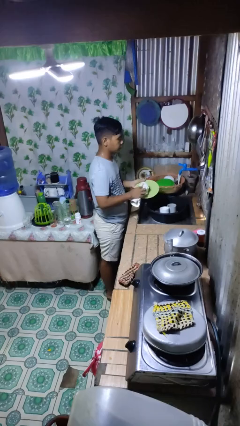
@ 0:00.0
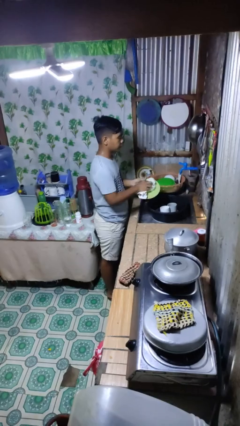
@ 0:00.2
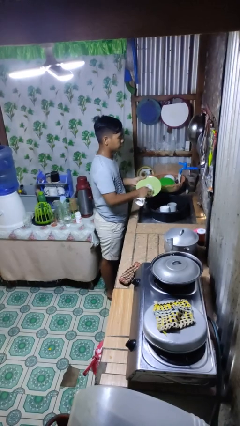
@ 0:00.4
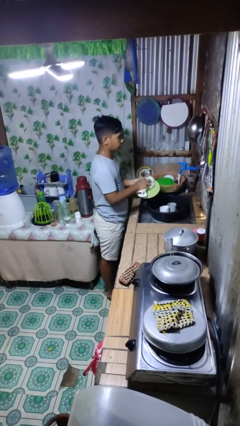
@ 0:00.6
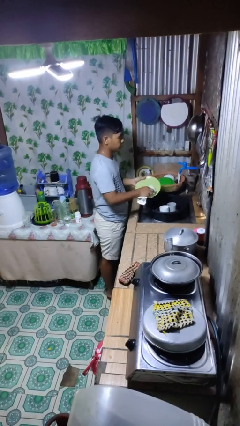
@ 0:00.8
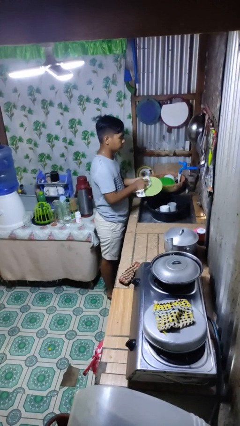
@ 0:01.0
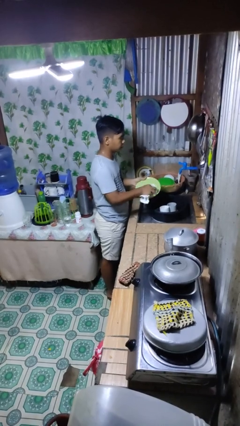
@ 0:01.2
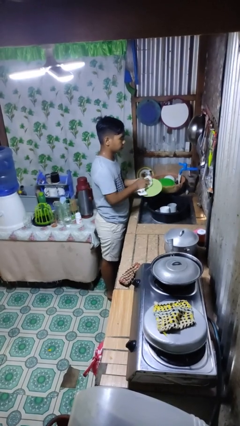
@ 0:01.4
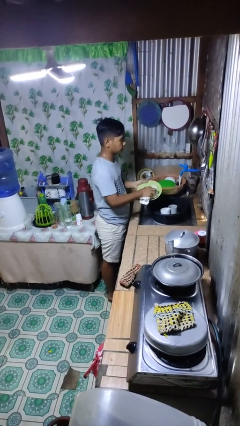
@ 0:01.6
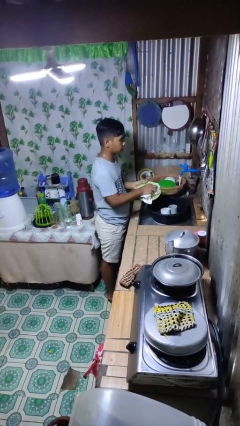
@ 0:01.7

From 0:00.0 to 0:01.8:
person dries dish

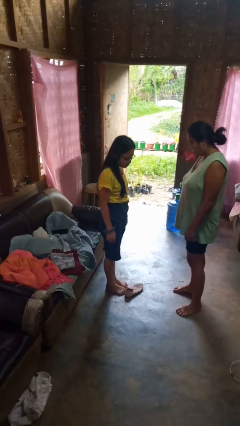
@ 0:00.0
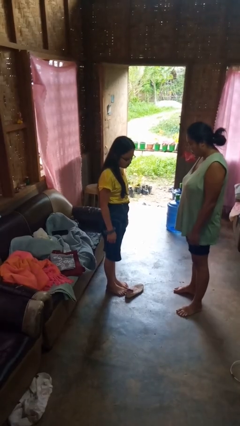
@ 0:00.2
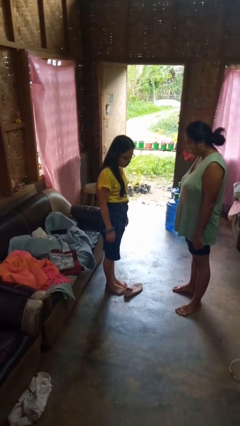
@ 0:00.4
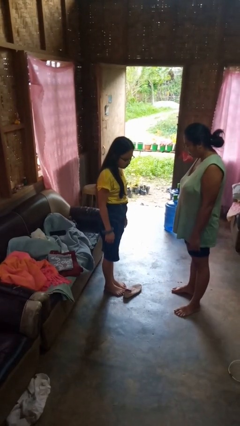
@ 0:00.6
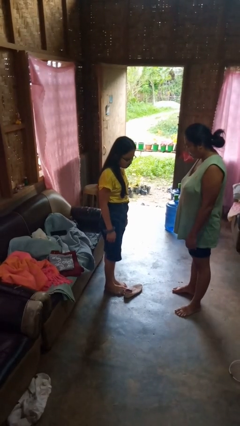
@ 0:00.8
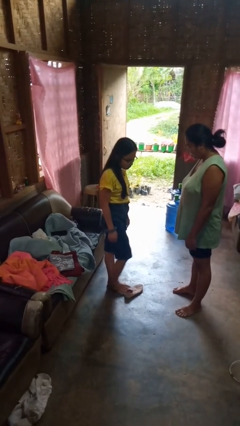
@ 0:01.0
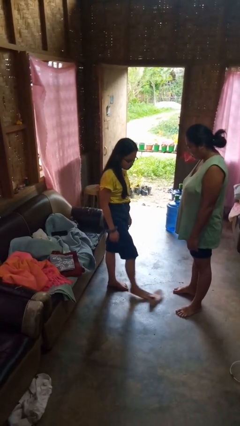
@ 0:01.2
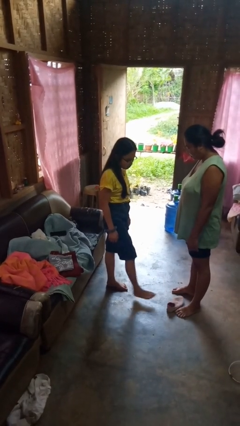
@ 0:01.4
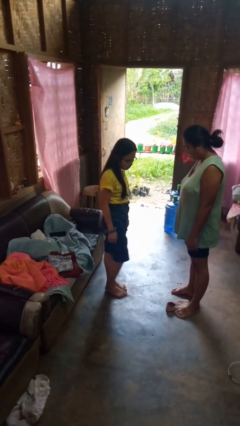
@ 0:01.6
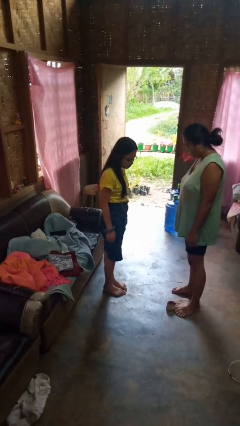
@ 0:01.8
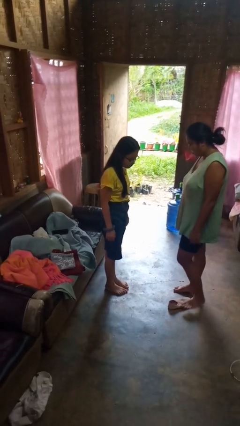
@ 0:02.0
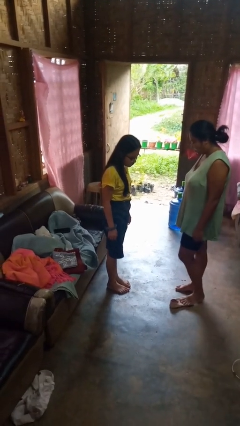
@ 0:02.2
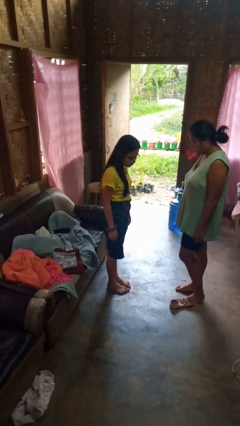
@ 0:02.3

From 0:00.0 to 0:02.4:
person kicks object to person

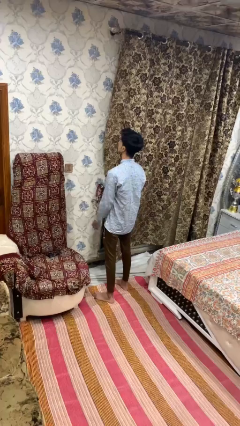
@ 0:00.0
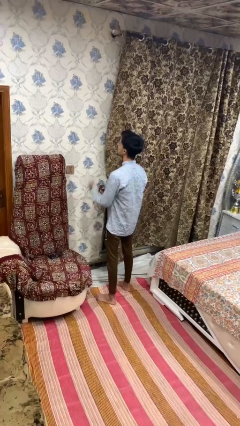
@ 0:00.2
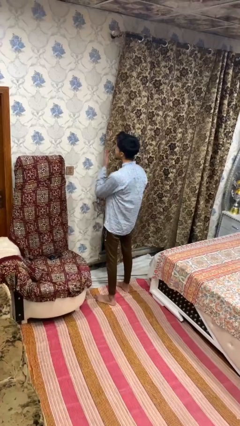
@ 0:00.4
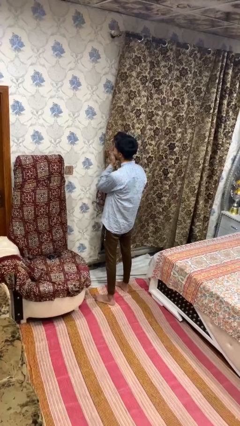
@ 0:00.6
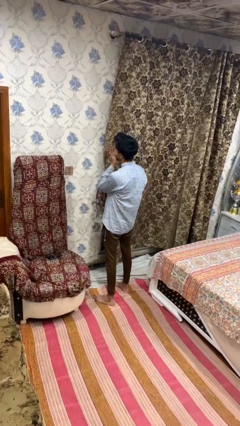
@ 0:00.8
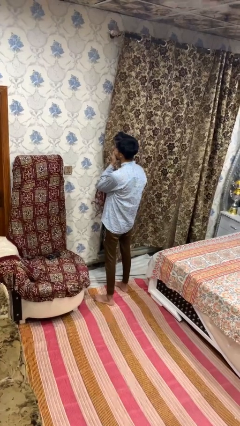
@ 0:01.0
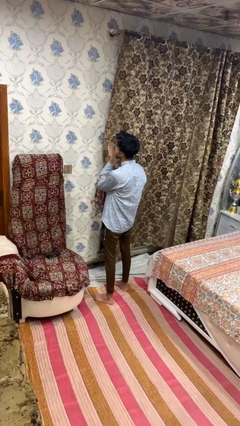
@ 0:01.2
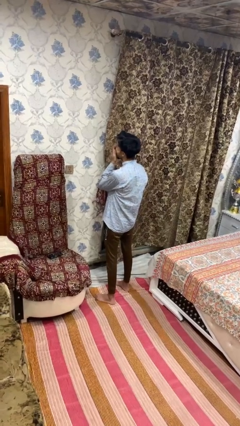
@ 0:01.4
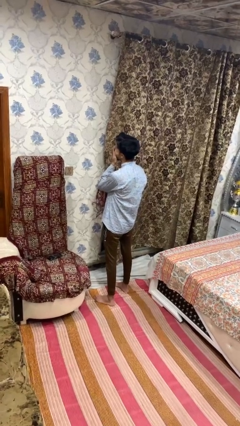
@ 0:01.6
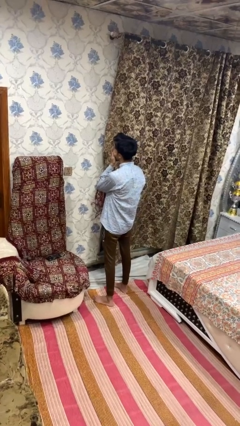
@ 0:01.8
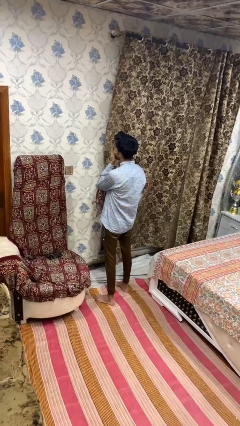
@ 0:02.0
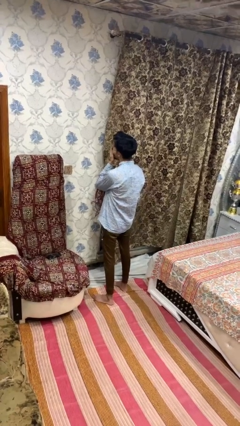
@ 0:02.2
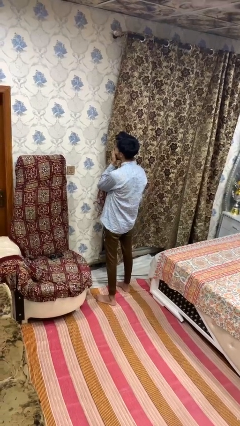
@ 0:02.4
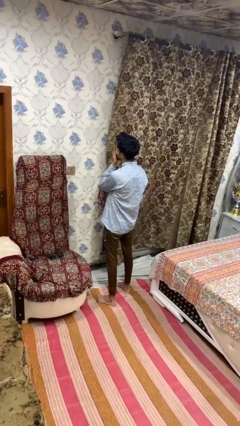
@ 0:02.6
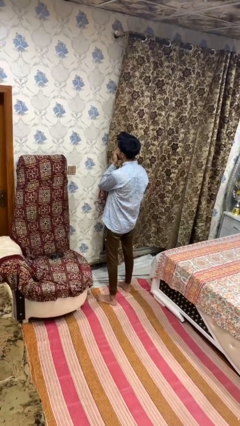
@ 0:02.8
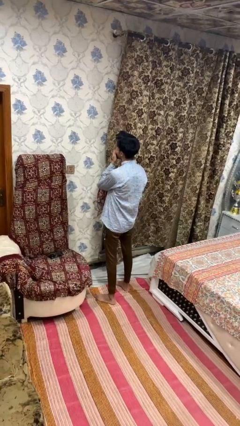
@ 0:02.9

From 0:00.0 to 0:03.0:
person yawns

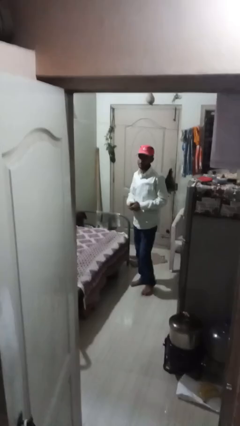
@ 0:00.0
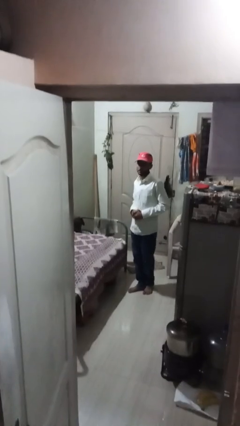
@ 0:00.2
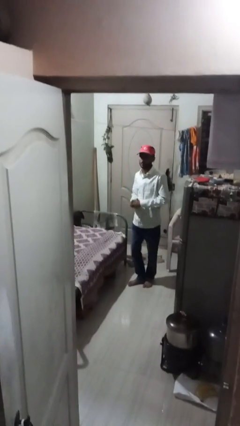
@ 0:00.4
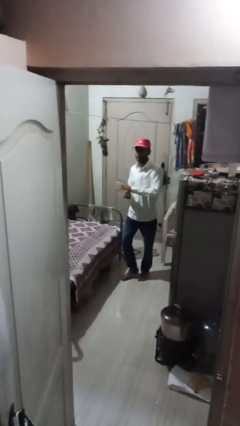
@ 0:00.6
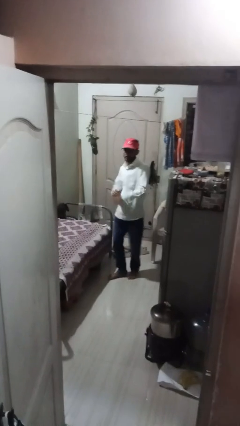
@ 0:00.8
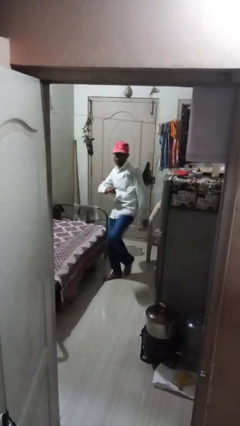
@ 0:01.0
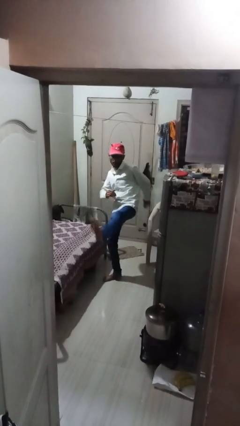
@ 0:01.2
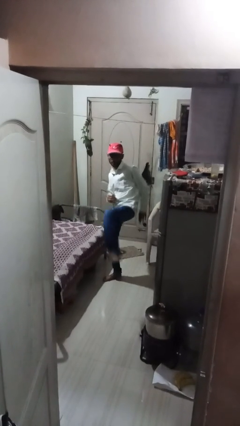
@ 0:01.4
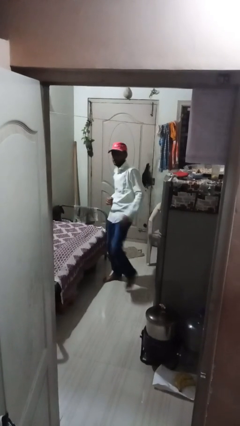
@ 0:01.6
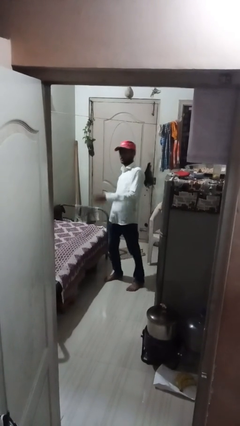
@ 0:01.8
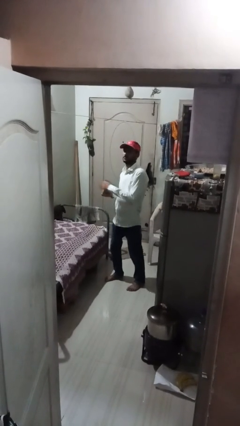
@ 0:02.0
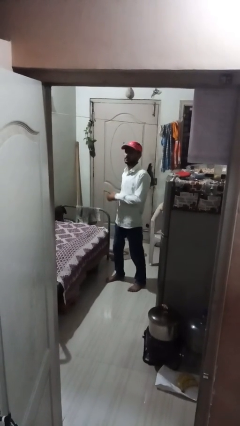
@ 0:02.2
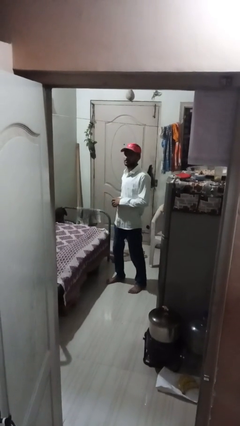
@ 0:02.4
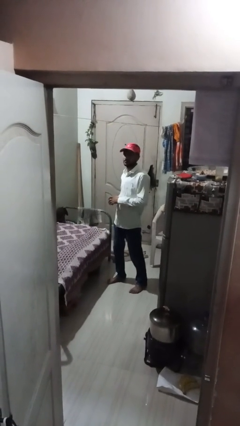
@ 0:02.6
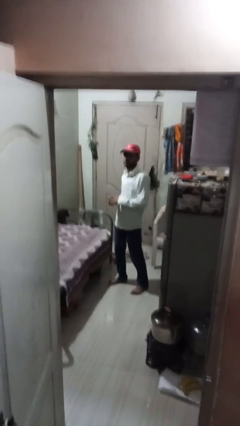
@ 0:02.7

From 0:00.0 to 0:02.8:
person karate kicks

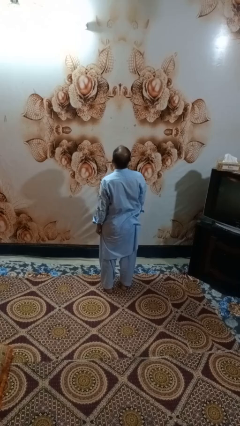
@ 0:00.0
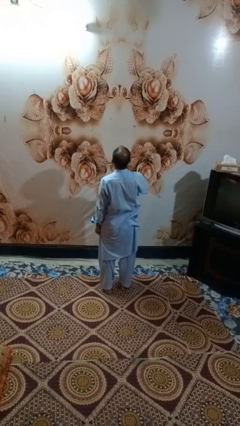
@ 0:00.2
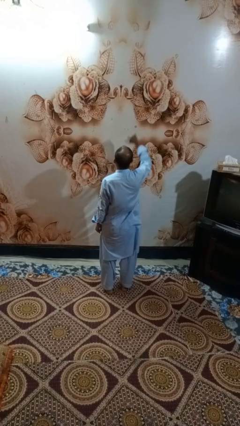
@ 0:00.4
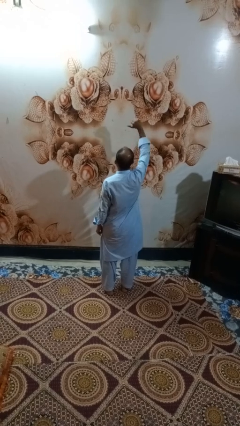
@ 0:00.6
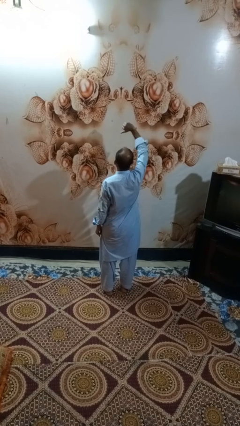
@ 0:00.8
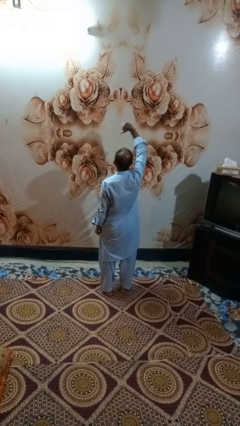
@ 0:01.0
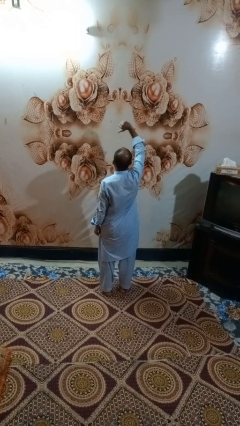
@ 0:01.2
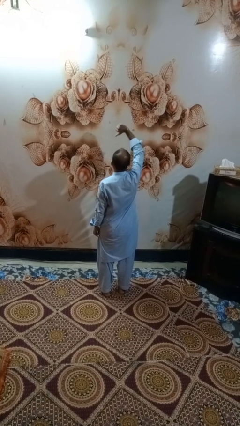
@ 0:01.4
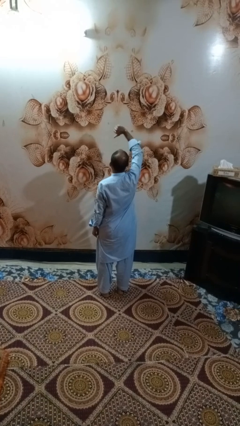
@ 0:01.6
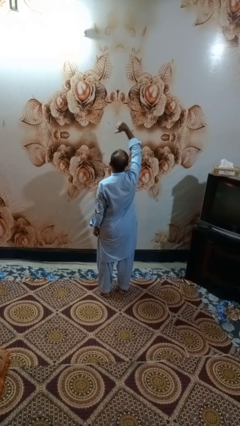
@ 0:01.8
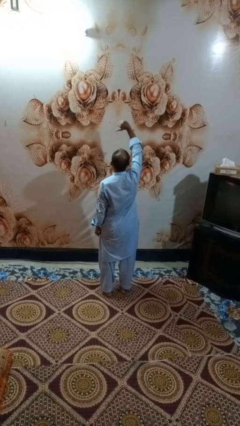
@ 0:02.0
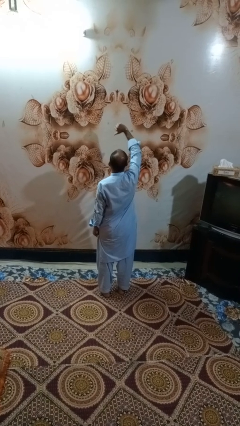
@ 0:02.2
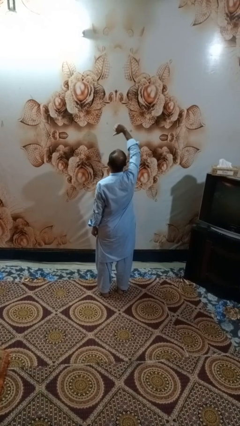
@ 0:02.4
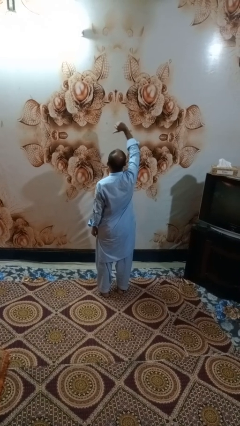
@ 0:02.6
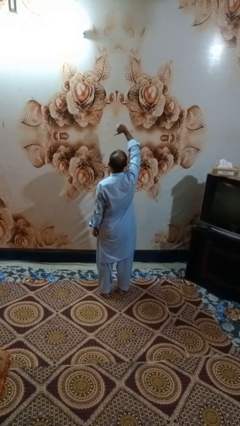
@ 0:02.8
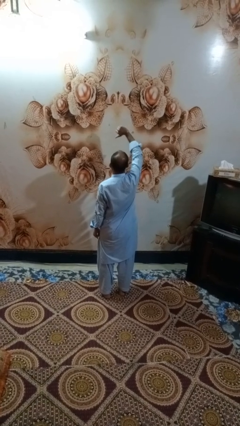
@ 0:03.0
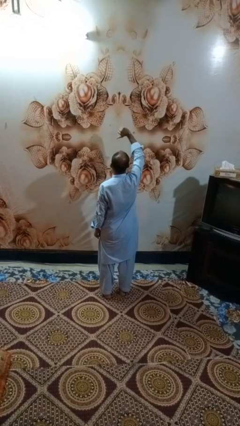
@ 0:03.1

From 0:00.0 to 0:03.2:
person gestures thumbs down

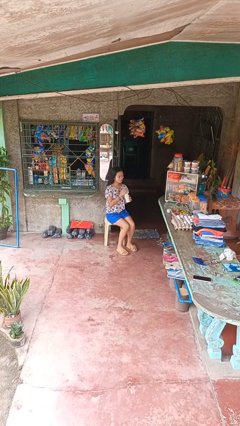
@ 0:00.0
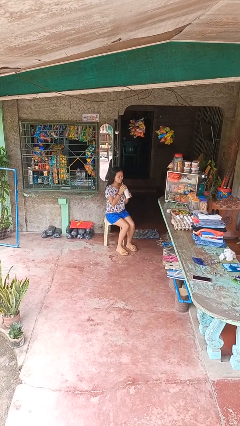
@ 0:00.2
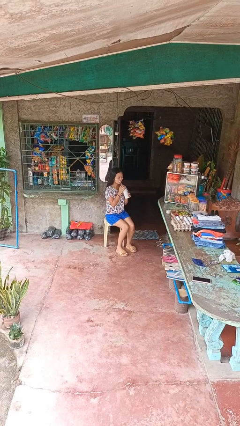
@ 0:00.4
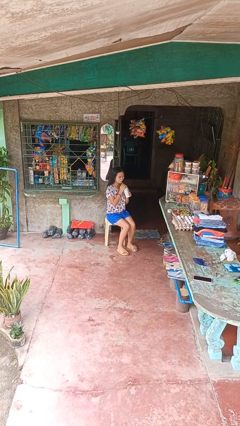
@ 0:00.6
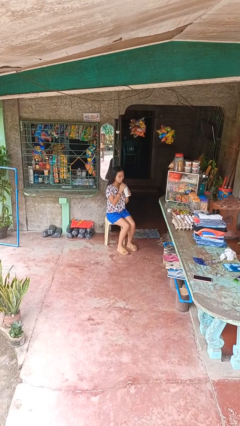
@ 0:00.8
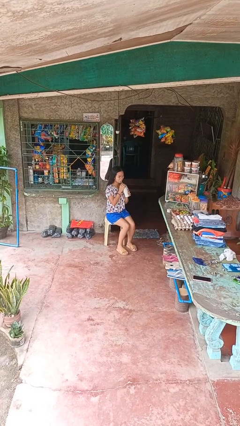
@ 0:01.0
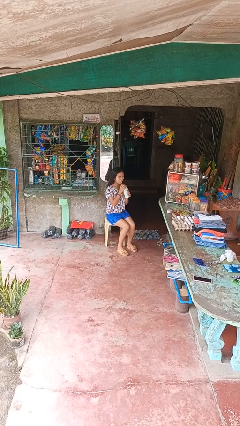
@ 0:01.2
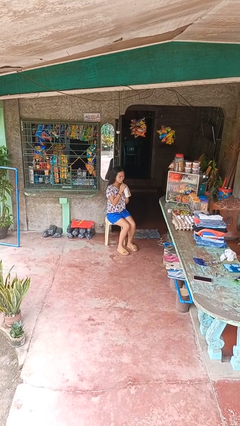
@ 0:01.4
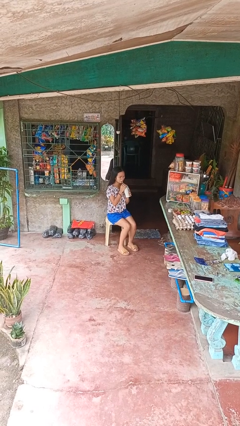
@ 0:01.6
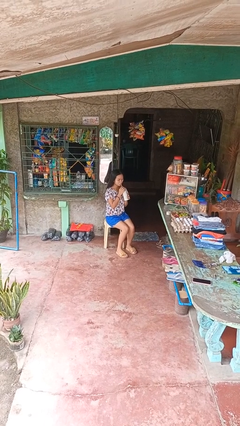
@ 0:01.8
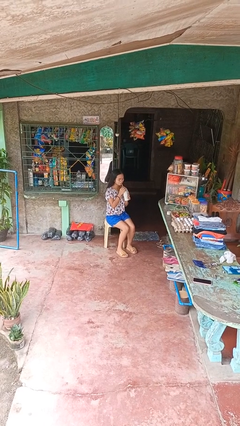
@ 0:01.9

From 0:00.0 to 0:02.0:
person drinks from straw

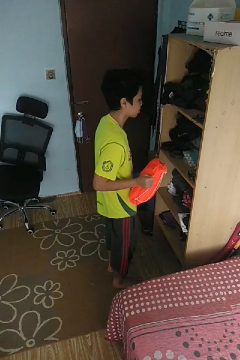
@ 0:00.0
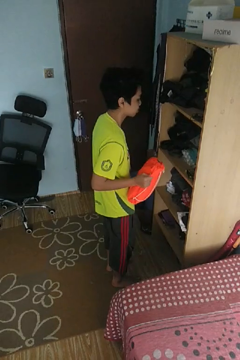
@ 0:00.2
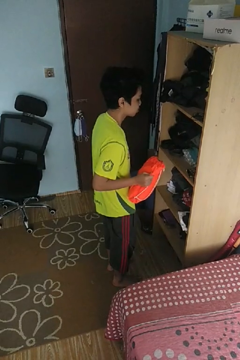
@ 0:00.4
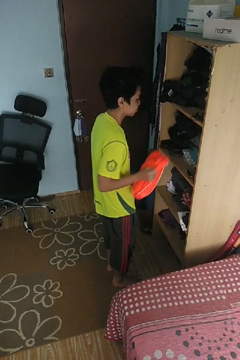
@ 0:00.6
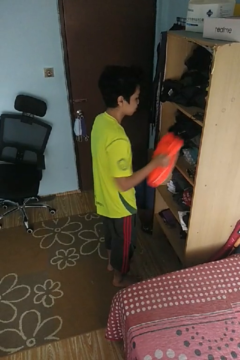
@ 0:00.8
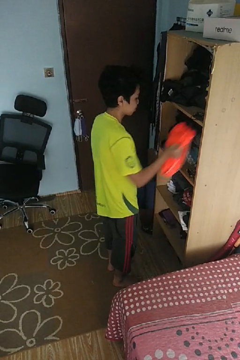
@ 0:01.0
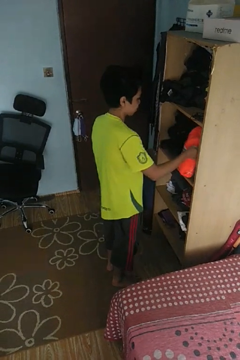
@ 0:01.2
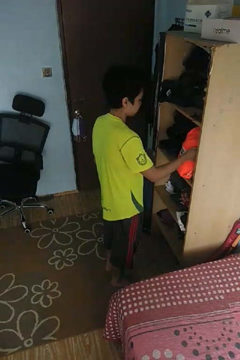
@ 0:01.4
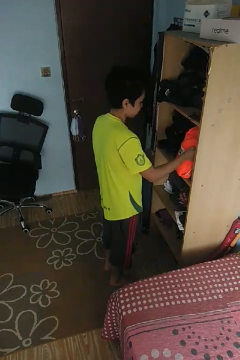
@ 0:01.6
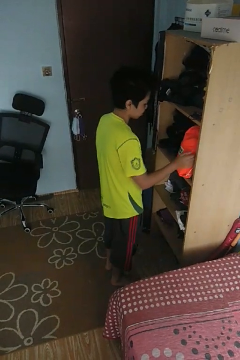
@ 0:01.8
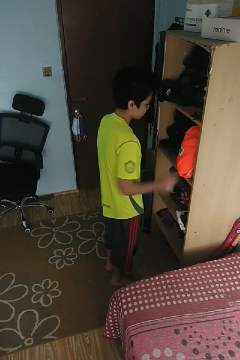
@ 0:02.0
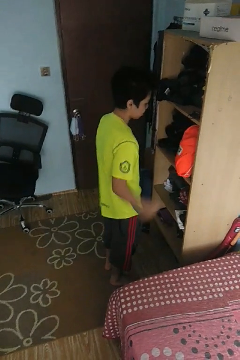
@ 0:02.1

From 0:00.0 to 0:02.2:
person puts down object into cabinet
